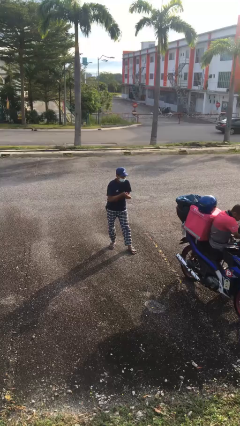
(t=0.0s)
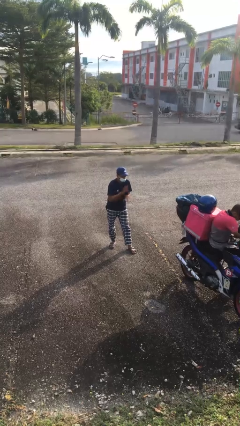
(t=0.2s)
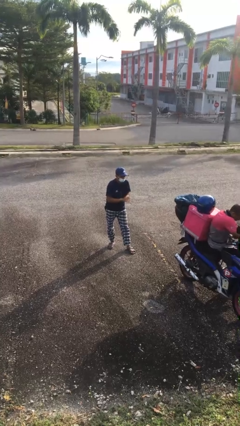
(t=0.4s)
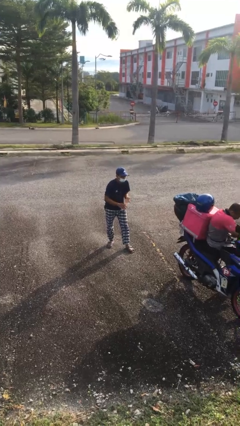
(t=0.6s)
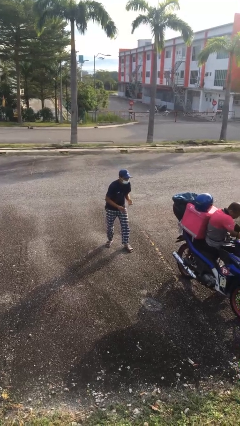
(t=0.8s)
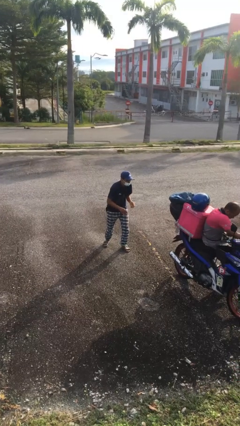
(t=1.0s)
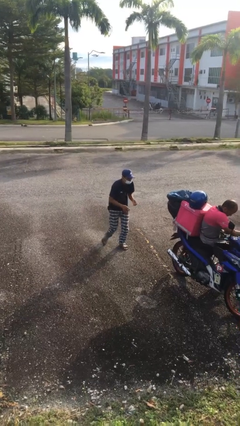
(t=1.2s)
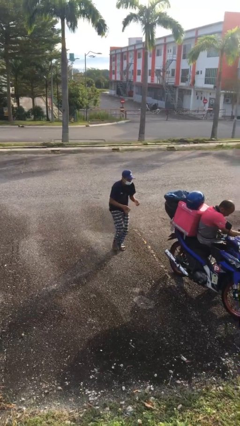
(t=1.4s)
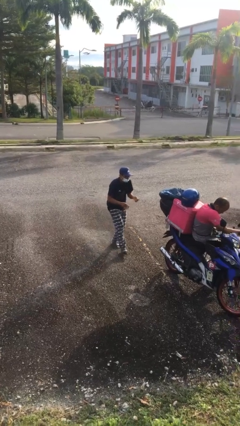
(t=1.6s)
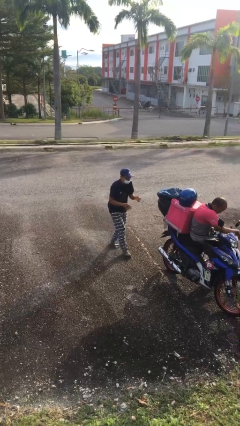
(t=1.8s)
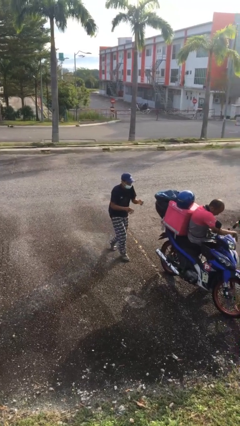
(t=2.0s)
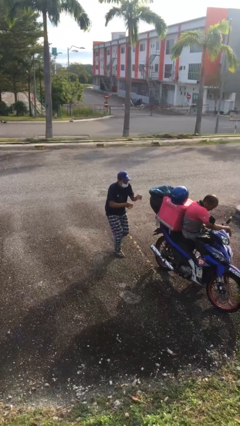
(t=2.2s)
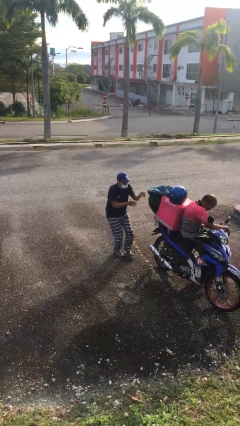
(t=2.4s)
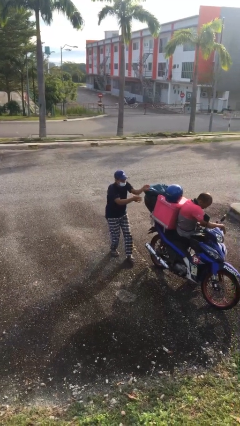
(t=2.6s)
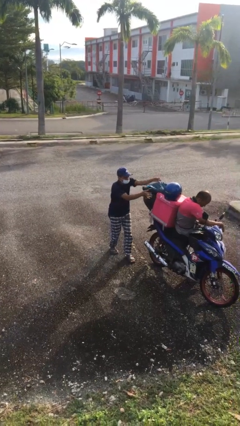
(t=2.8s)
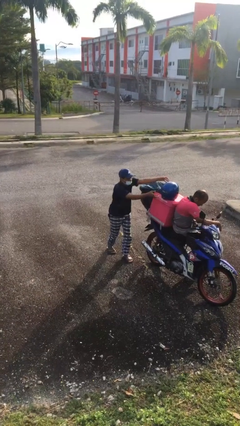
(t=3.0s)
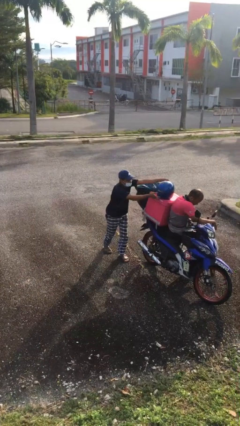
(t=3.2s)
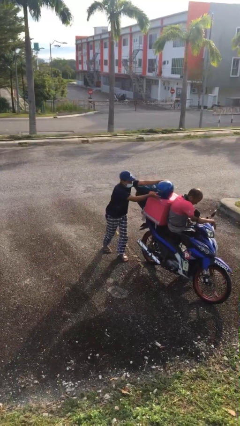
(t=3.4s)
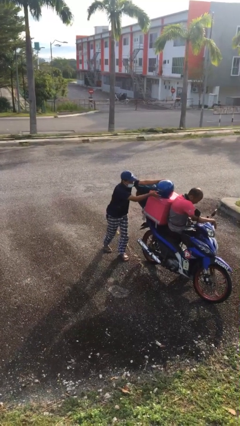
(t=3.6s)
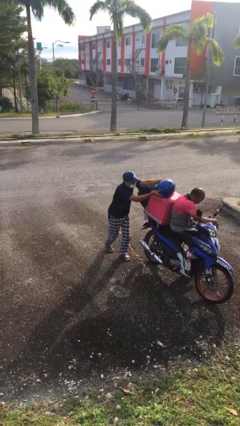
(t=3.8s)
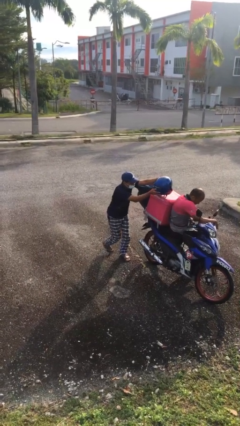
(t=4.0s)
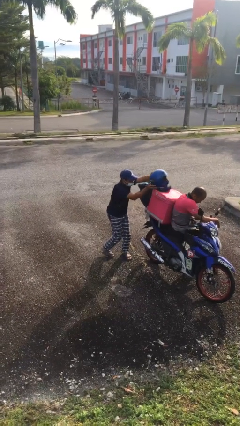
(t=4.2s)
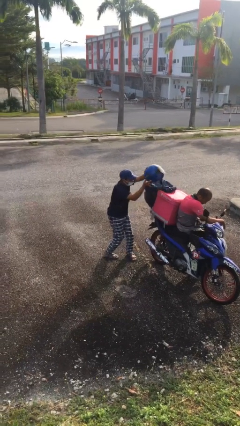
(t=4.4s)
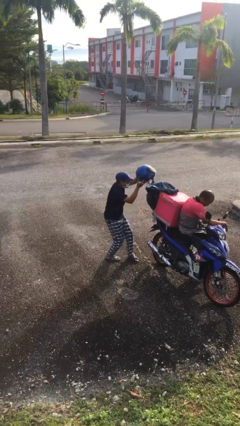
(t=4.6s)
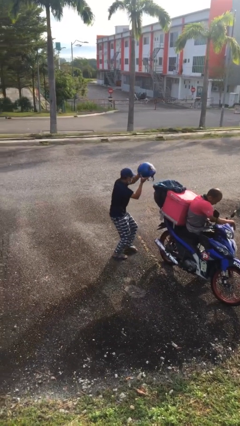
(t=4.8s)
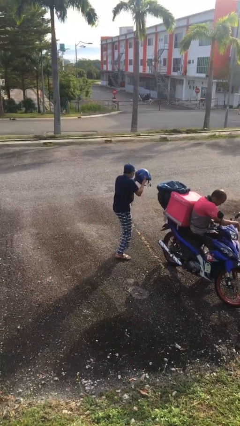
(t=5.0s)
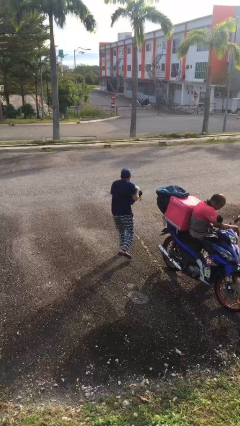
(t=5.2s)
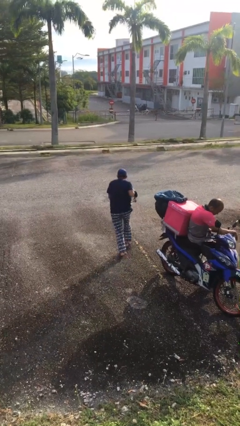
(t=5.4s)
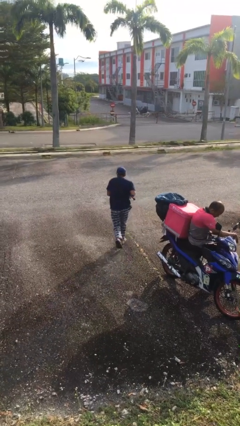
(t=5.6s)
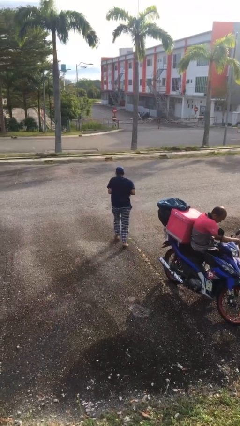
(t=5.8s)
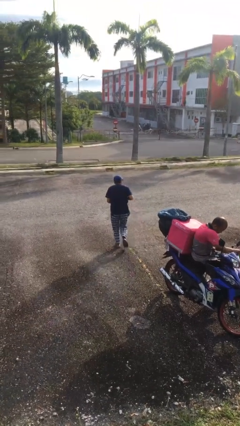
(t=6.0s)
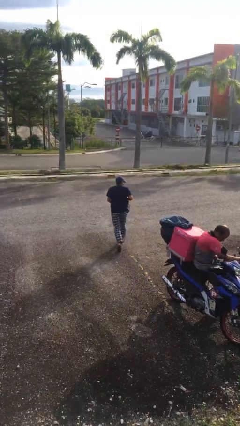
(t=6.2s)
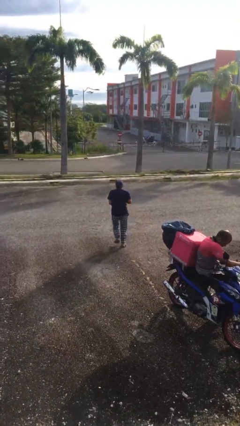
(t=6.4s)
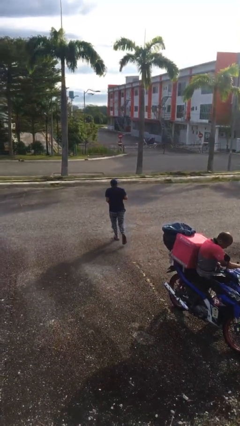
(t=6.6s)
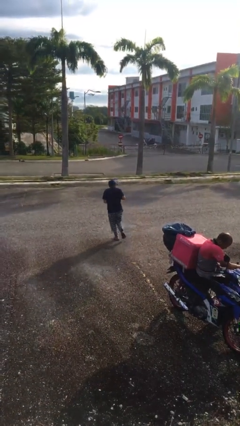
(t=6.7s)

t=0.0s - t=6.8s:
person steals object from person

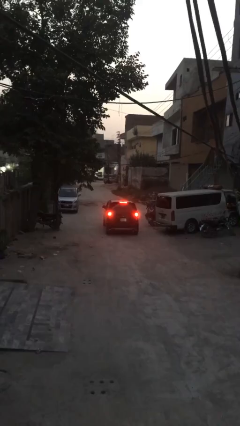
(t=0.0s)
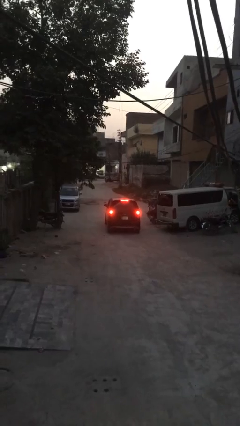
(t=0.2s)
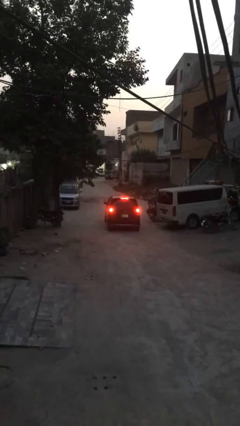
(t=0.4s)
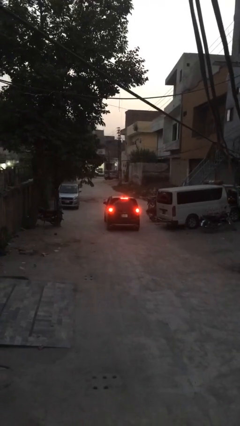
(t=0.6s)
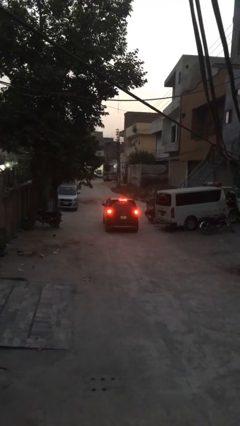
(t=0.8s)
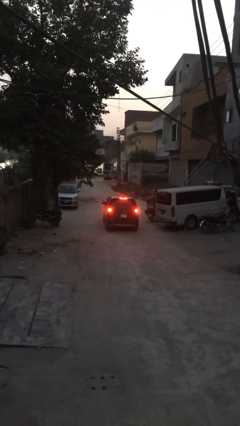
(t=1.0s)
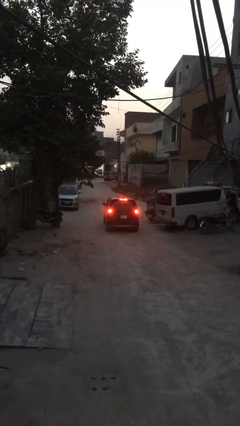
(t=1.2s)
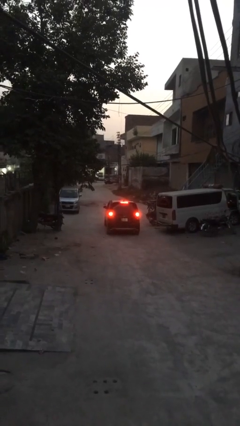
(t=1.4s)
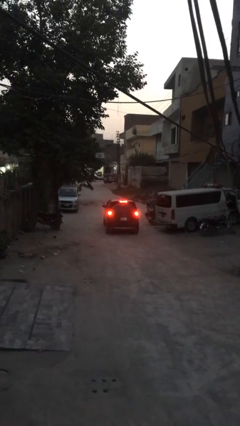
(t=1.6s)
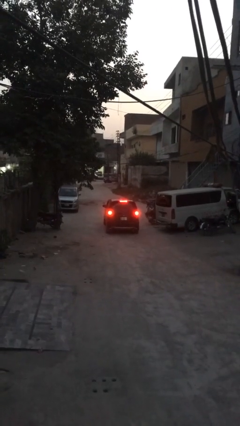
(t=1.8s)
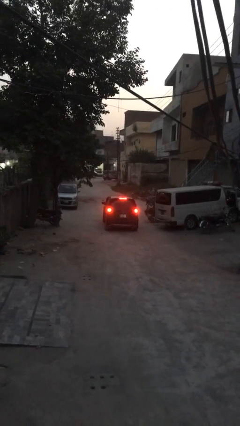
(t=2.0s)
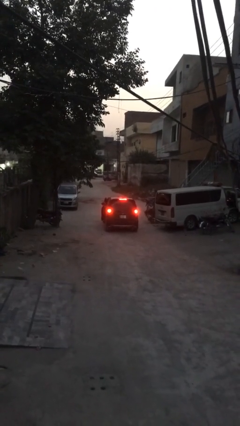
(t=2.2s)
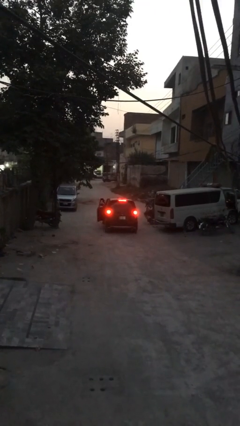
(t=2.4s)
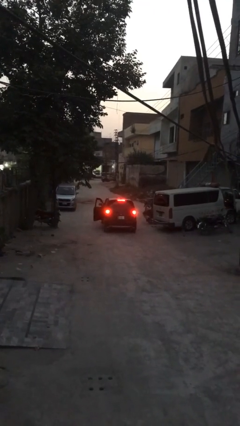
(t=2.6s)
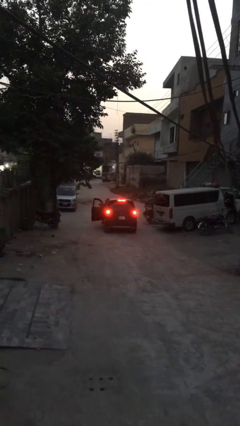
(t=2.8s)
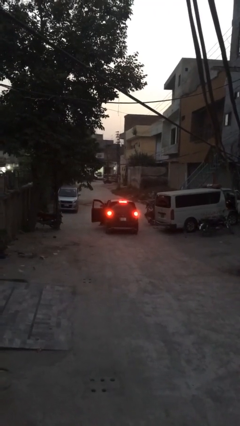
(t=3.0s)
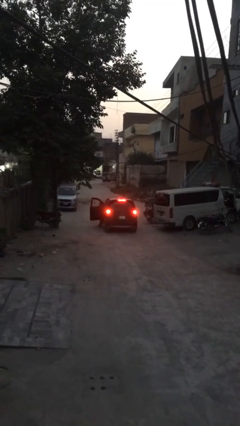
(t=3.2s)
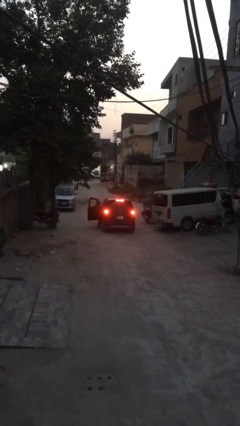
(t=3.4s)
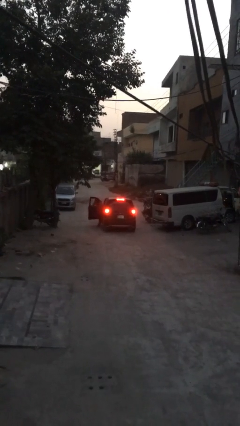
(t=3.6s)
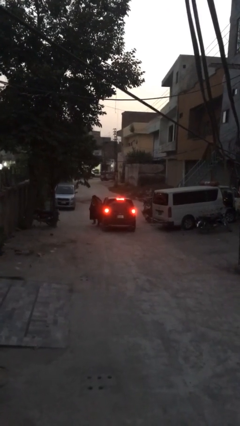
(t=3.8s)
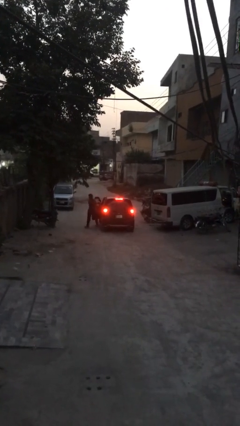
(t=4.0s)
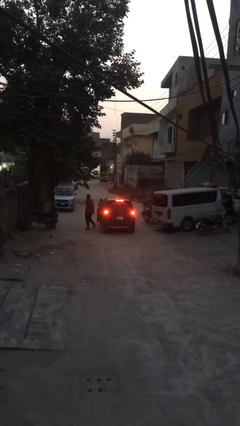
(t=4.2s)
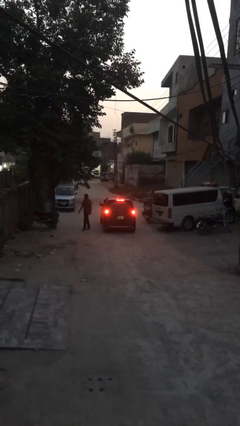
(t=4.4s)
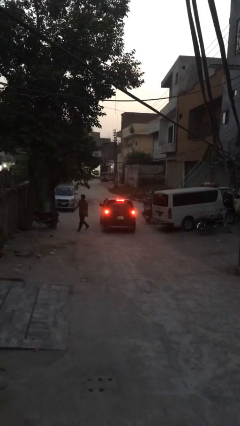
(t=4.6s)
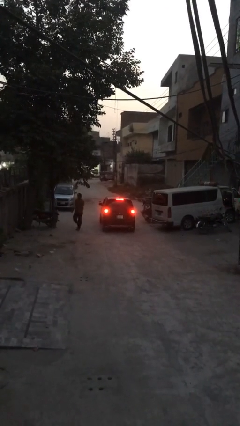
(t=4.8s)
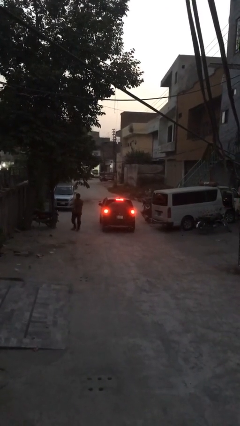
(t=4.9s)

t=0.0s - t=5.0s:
car drops off person

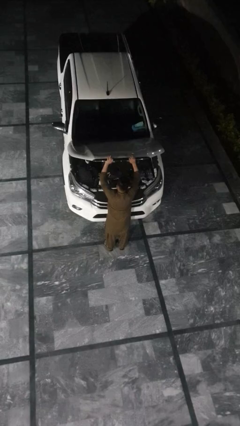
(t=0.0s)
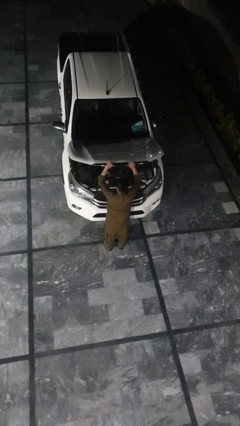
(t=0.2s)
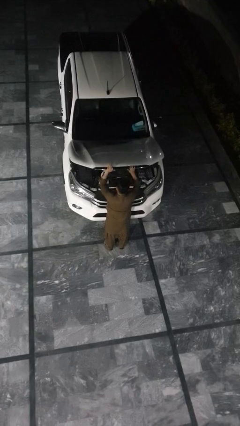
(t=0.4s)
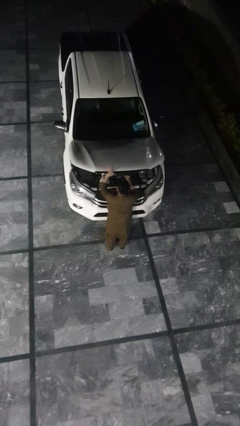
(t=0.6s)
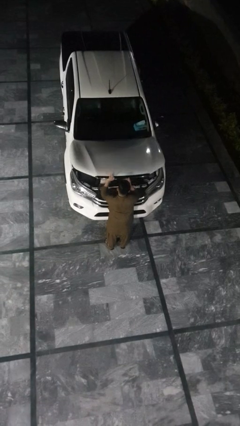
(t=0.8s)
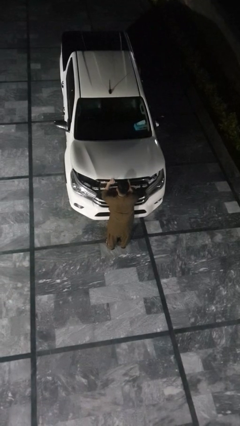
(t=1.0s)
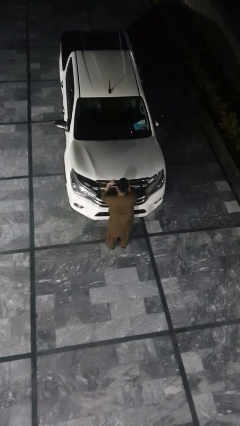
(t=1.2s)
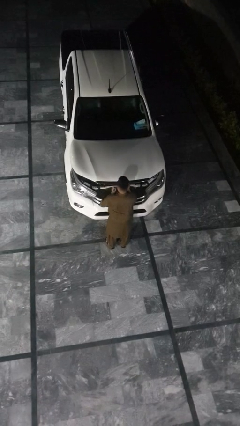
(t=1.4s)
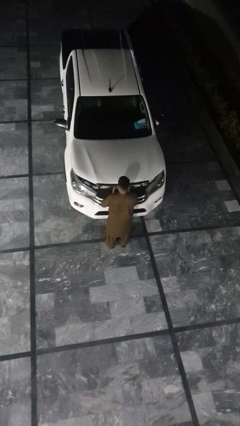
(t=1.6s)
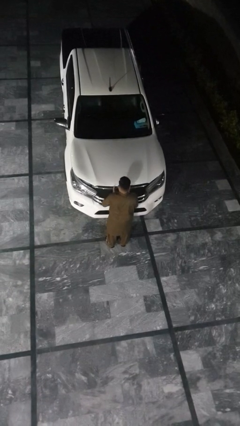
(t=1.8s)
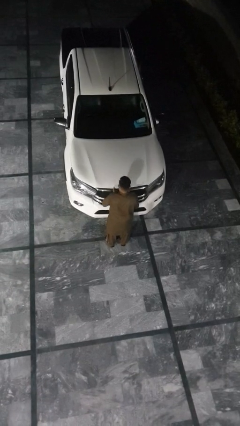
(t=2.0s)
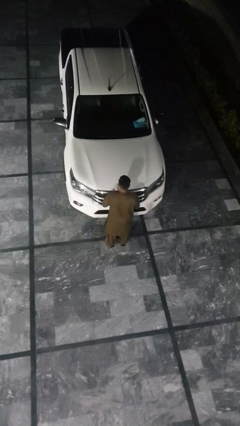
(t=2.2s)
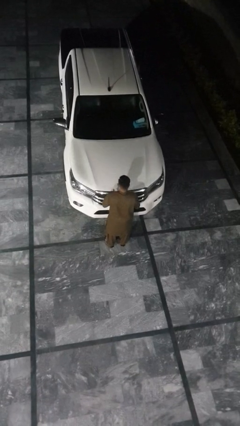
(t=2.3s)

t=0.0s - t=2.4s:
person closes car hood

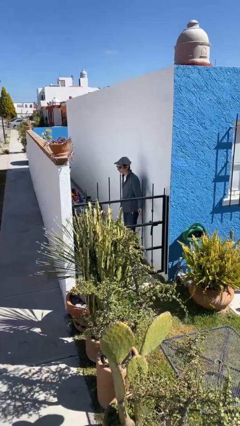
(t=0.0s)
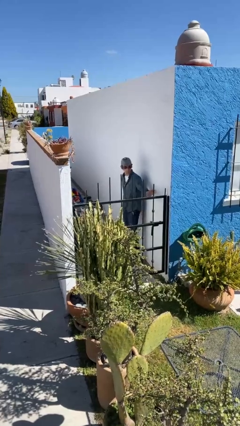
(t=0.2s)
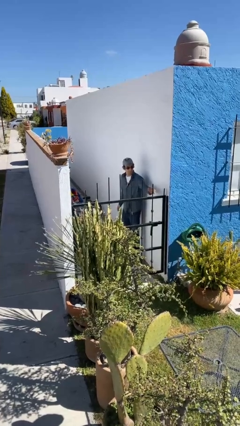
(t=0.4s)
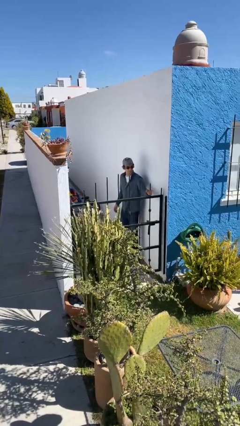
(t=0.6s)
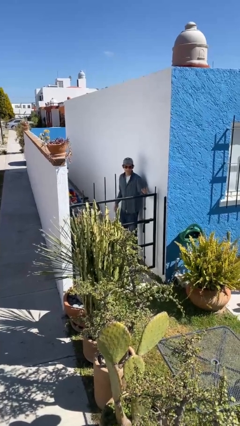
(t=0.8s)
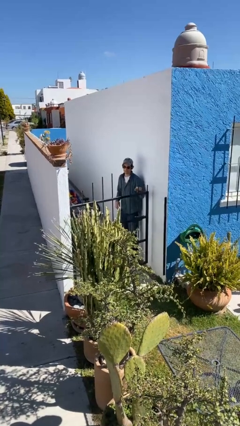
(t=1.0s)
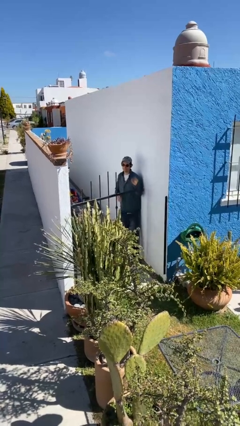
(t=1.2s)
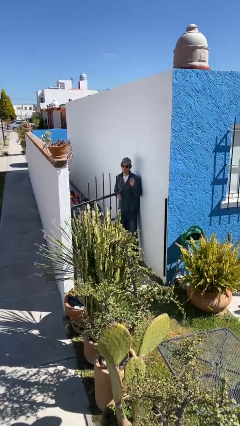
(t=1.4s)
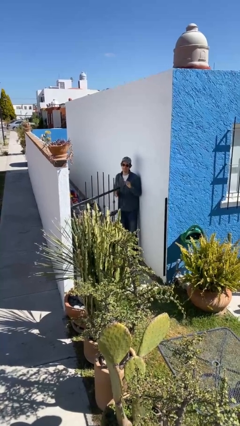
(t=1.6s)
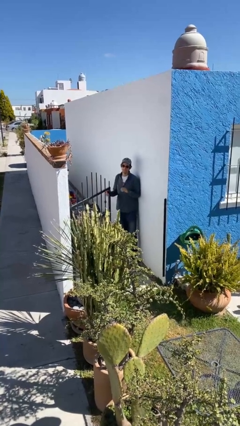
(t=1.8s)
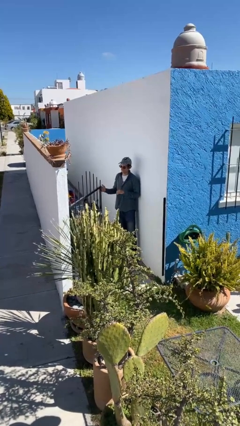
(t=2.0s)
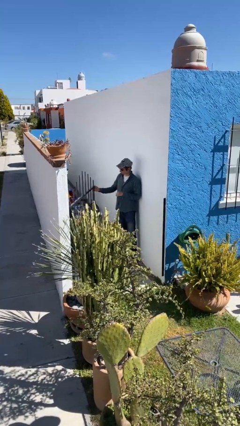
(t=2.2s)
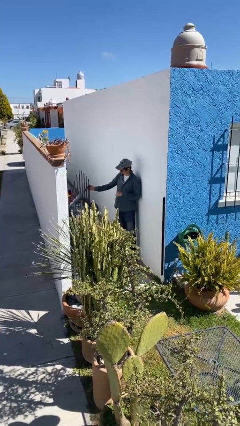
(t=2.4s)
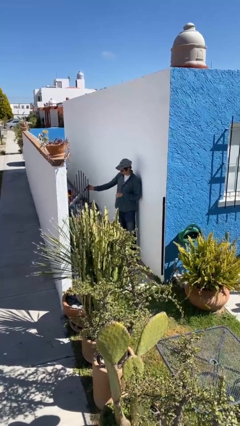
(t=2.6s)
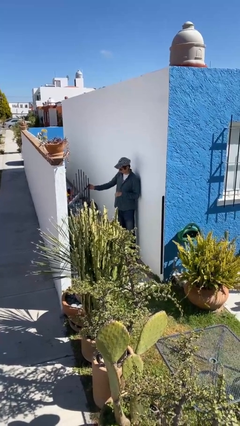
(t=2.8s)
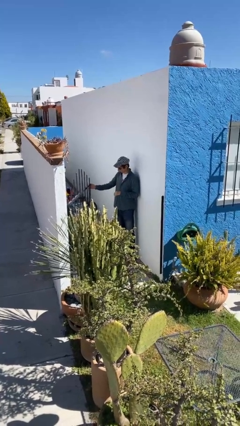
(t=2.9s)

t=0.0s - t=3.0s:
person opens facility door
